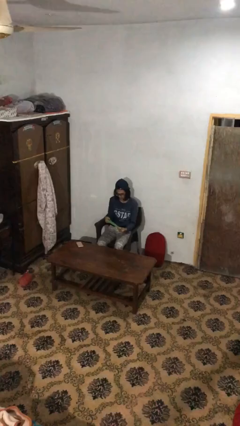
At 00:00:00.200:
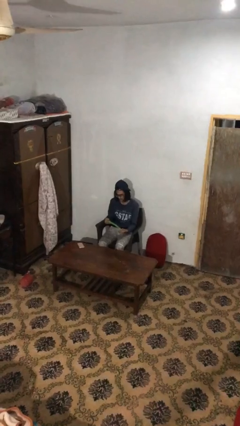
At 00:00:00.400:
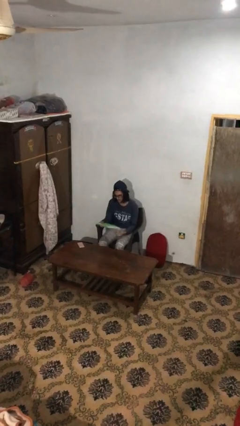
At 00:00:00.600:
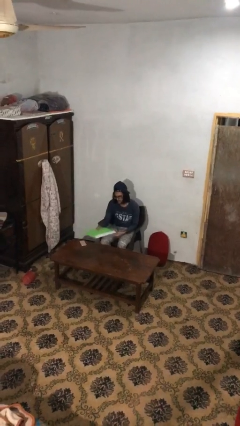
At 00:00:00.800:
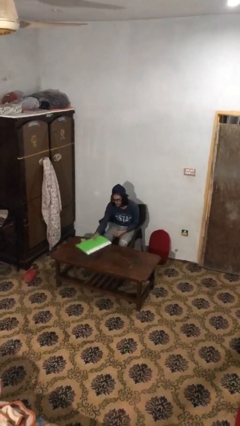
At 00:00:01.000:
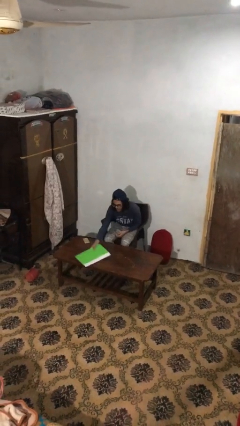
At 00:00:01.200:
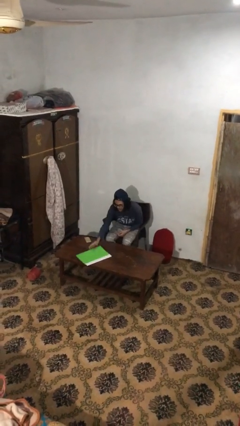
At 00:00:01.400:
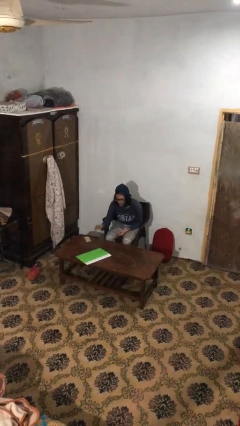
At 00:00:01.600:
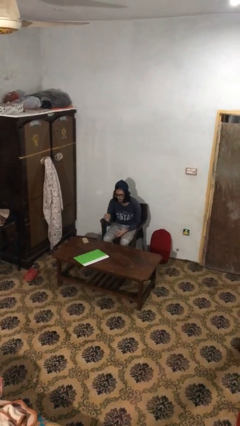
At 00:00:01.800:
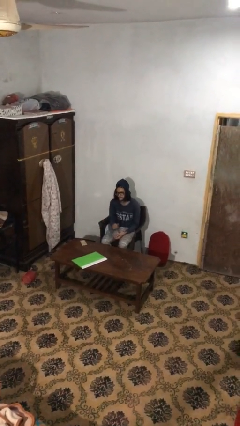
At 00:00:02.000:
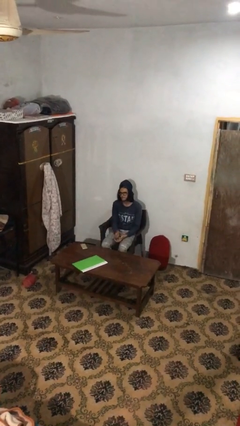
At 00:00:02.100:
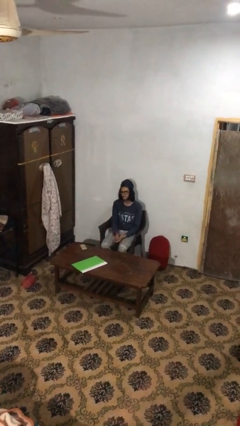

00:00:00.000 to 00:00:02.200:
person puts down object on table

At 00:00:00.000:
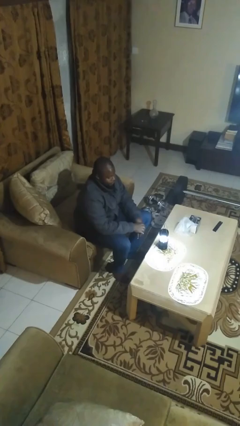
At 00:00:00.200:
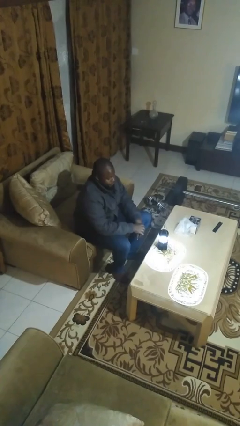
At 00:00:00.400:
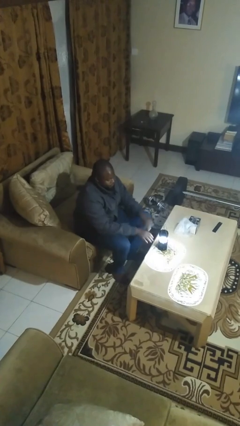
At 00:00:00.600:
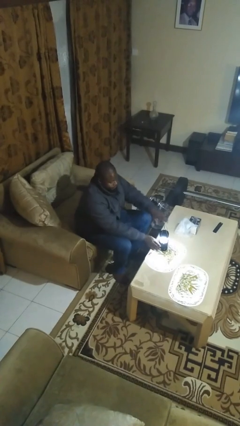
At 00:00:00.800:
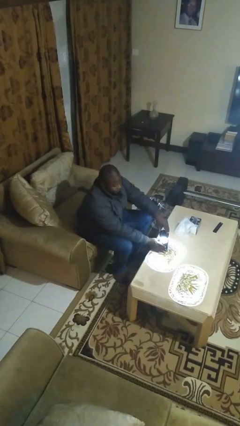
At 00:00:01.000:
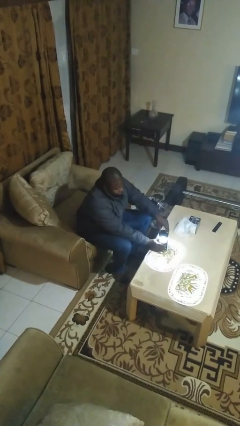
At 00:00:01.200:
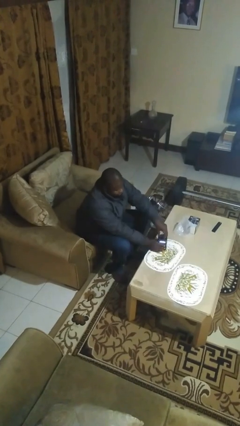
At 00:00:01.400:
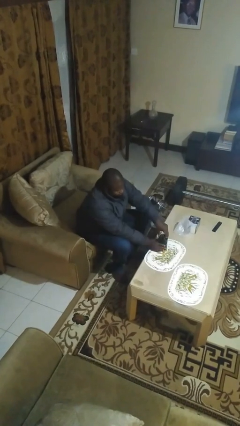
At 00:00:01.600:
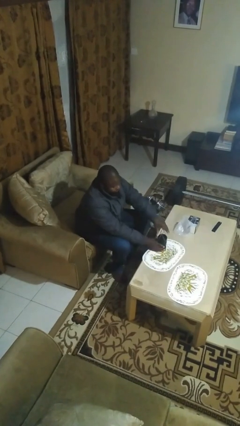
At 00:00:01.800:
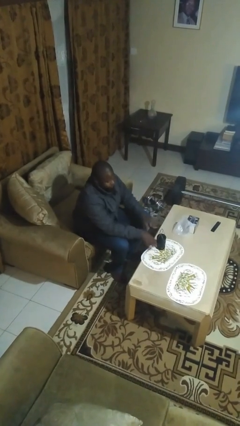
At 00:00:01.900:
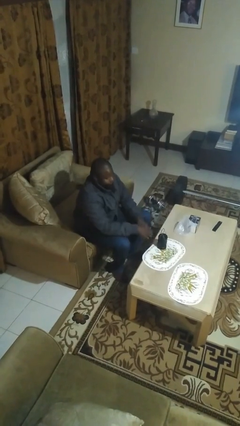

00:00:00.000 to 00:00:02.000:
person turns off lamp

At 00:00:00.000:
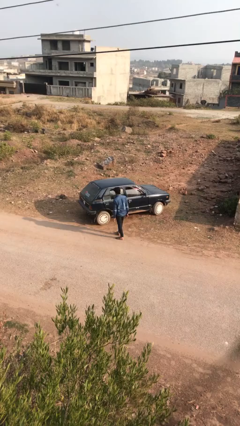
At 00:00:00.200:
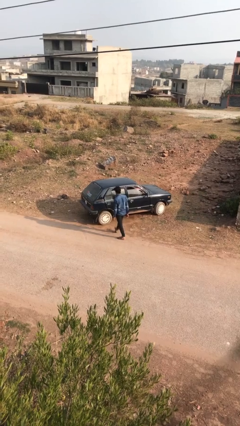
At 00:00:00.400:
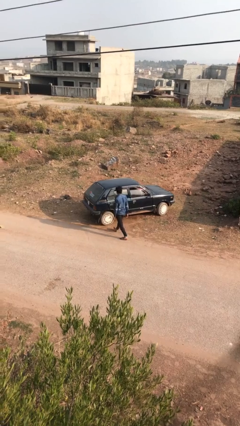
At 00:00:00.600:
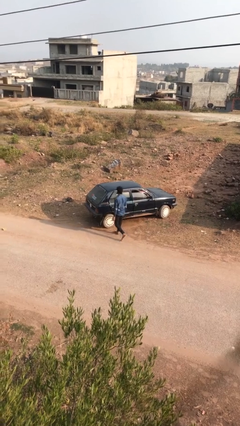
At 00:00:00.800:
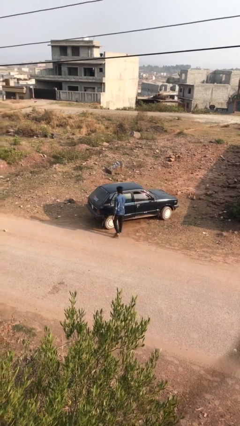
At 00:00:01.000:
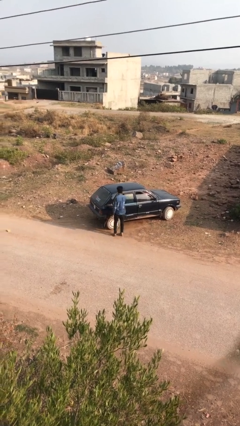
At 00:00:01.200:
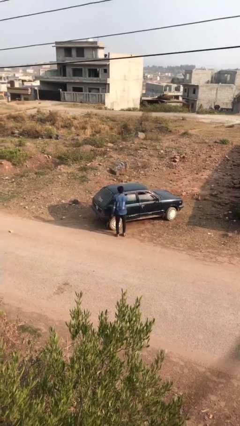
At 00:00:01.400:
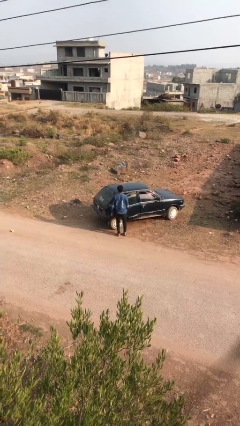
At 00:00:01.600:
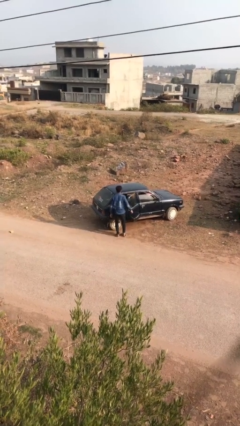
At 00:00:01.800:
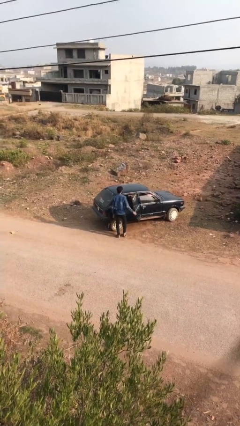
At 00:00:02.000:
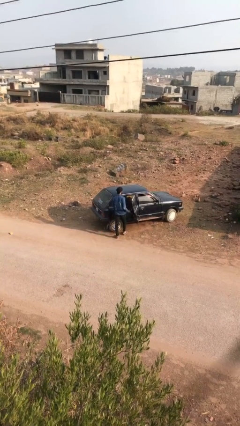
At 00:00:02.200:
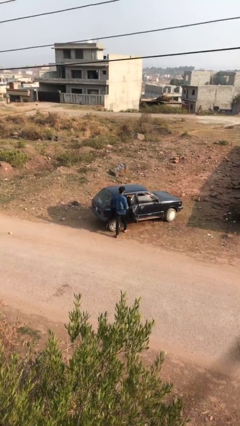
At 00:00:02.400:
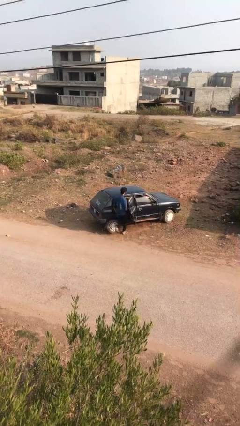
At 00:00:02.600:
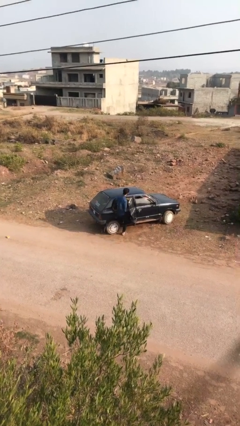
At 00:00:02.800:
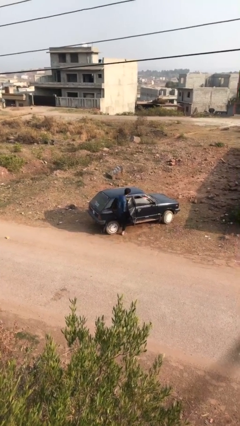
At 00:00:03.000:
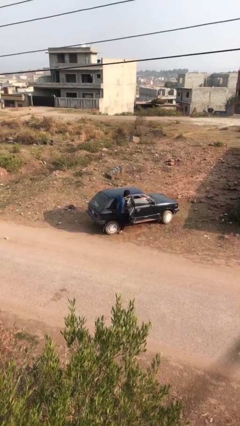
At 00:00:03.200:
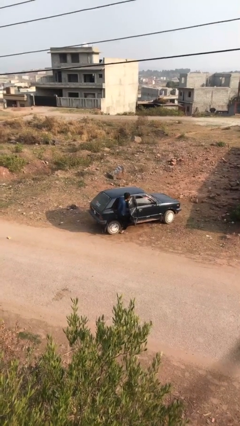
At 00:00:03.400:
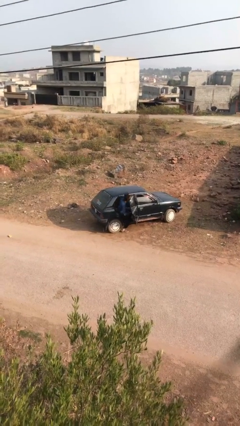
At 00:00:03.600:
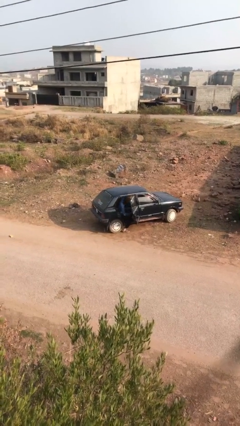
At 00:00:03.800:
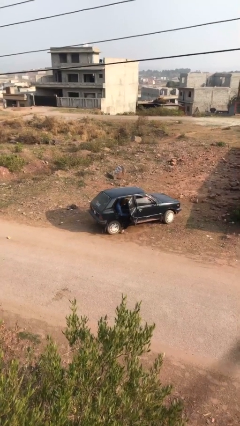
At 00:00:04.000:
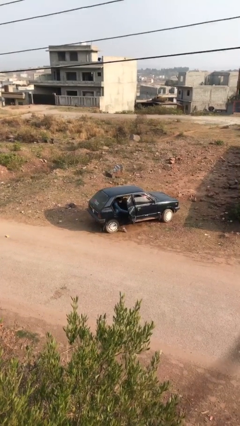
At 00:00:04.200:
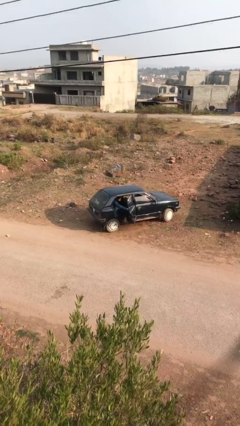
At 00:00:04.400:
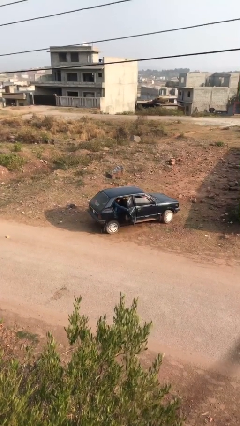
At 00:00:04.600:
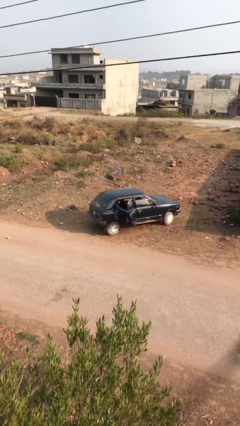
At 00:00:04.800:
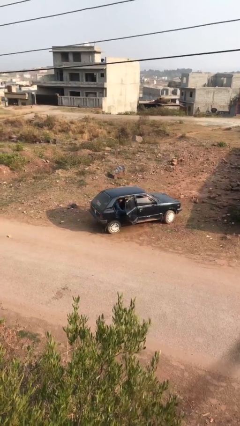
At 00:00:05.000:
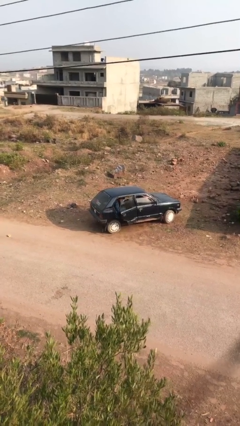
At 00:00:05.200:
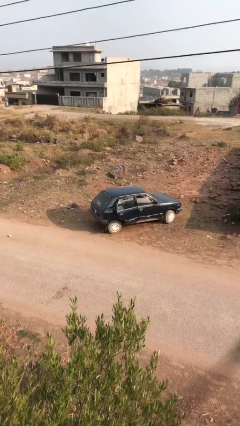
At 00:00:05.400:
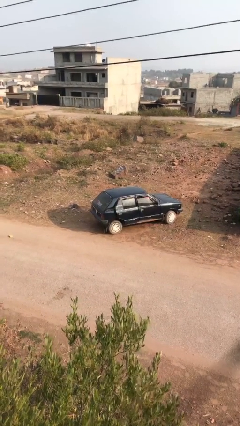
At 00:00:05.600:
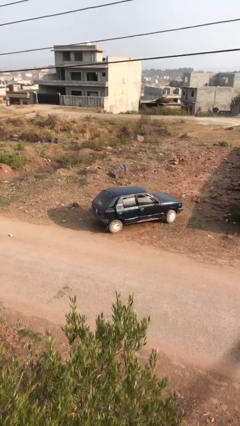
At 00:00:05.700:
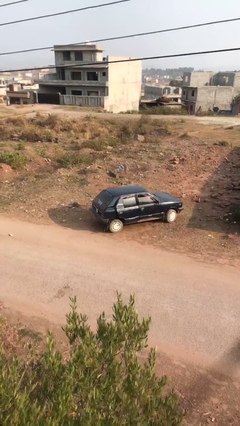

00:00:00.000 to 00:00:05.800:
car picks up person

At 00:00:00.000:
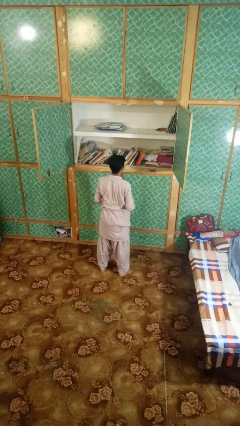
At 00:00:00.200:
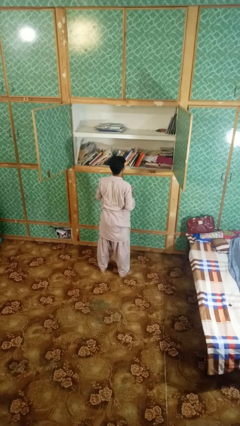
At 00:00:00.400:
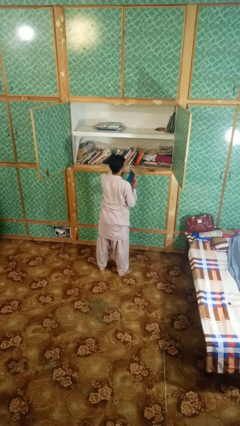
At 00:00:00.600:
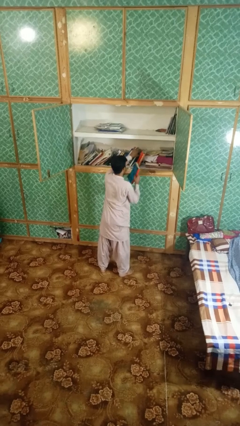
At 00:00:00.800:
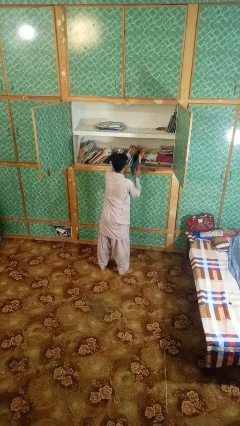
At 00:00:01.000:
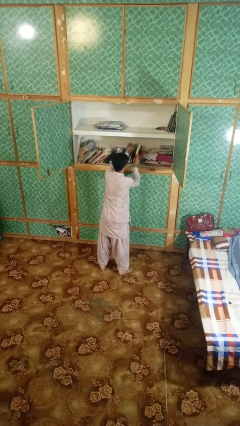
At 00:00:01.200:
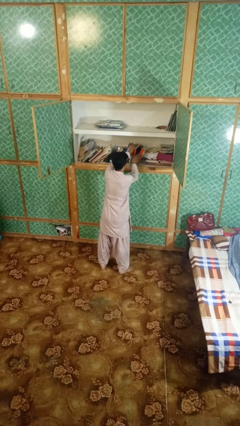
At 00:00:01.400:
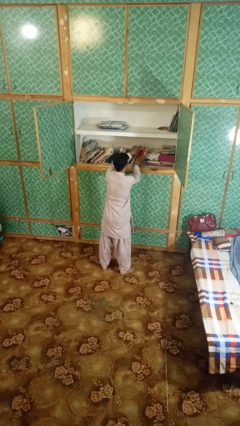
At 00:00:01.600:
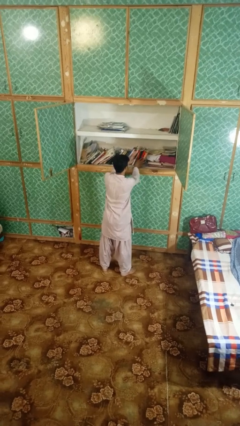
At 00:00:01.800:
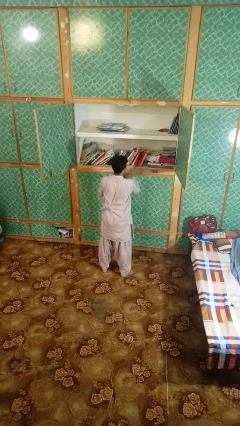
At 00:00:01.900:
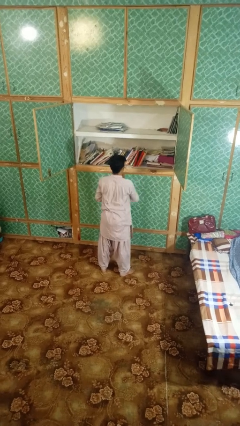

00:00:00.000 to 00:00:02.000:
person puts down object on shelf

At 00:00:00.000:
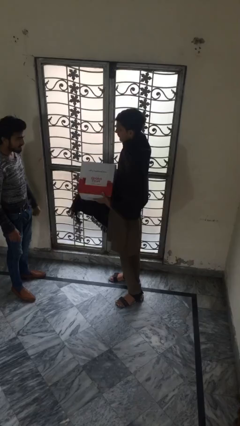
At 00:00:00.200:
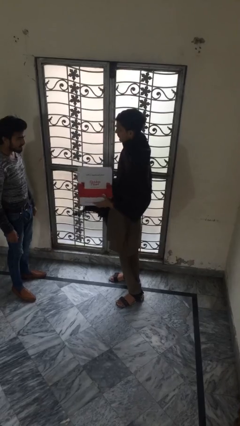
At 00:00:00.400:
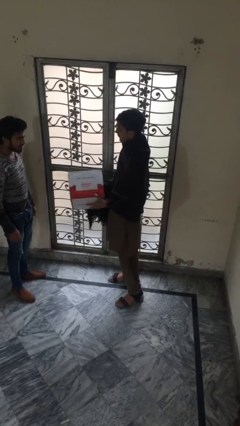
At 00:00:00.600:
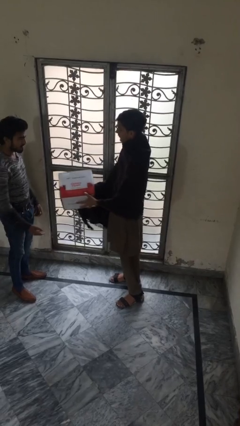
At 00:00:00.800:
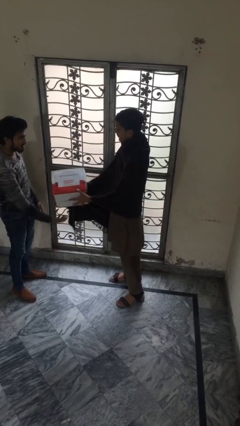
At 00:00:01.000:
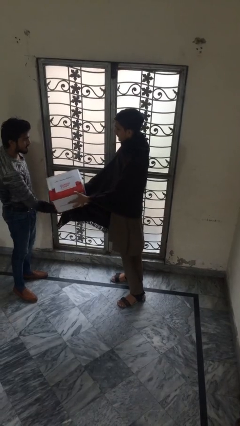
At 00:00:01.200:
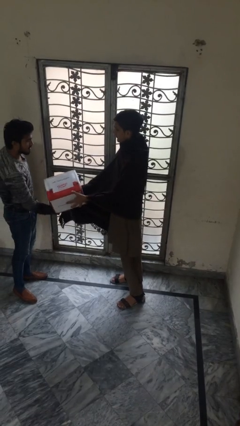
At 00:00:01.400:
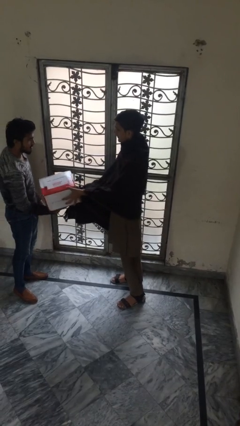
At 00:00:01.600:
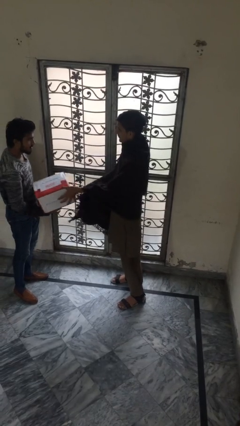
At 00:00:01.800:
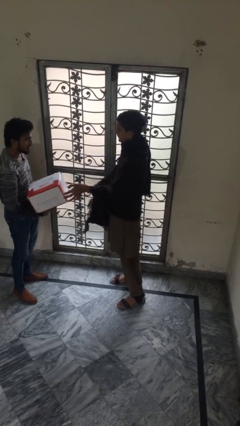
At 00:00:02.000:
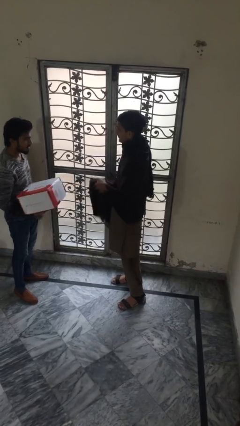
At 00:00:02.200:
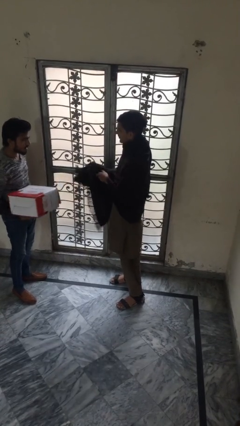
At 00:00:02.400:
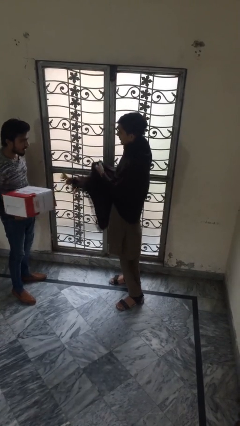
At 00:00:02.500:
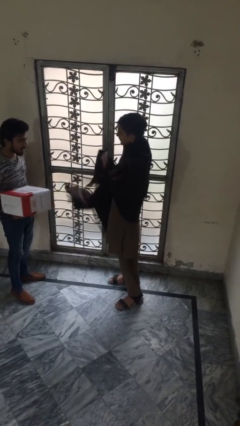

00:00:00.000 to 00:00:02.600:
person transfers object to person

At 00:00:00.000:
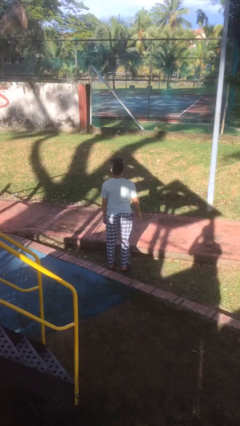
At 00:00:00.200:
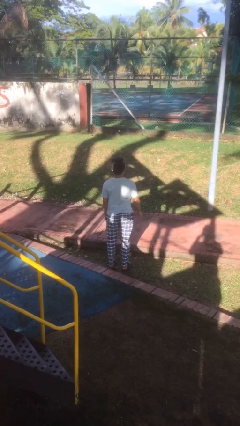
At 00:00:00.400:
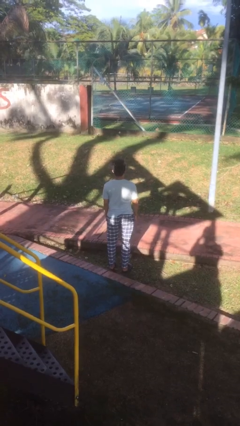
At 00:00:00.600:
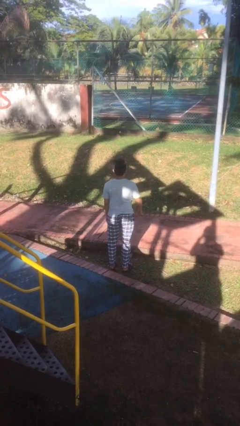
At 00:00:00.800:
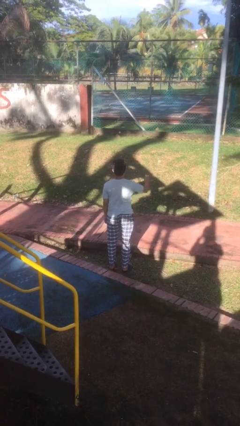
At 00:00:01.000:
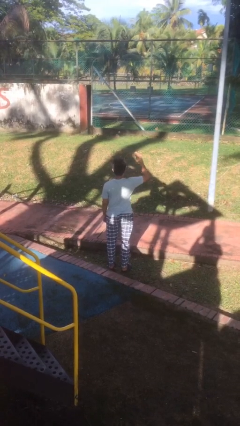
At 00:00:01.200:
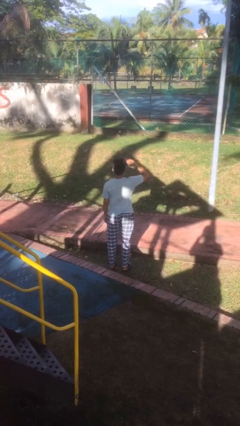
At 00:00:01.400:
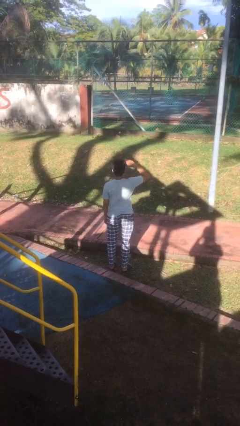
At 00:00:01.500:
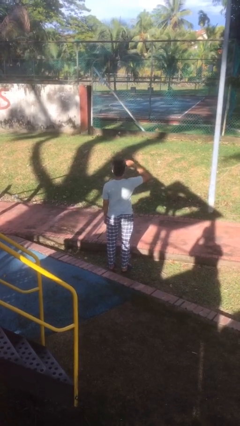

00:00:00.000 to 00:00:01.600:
person salutes

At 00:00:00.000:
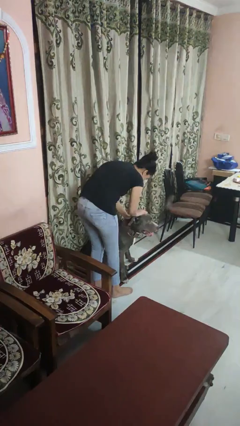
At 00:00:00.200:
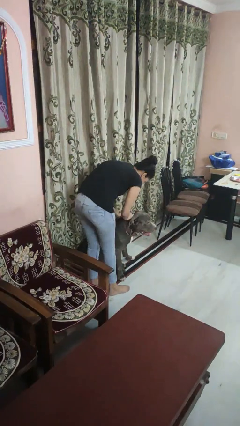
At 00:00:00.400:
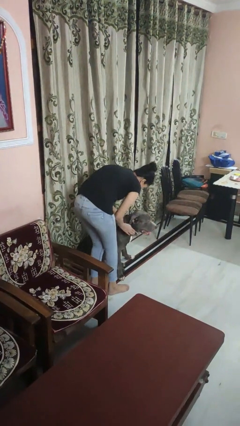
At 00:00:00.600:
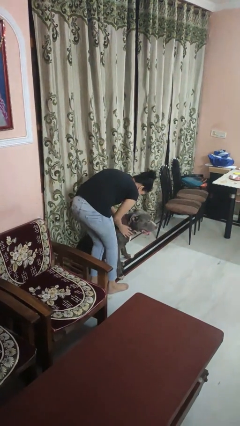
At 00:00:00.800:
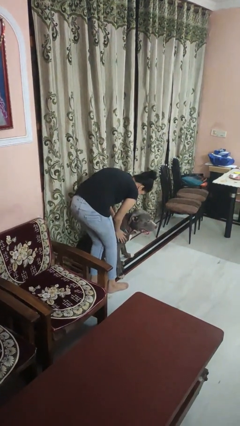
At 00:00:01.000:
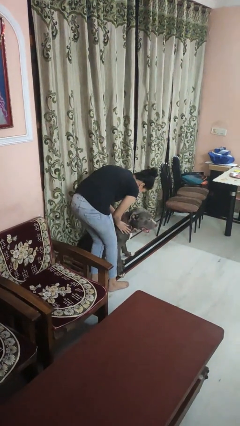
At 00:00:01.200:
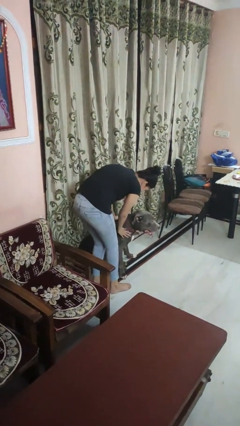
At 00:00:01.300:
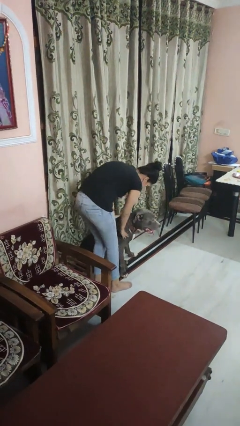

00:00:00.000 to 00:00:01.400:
person pets dog
